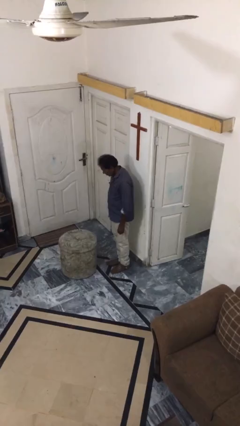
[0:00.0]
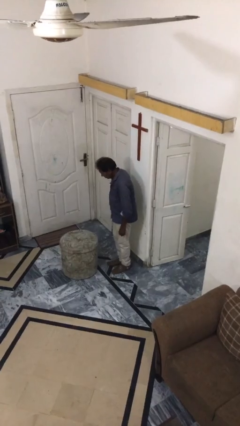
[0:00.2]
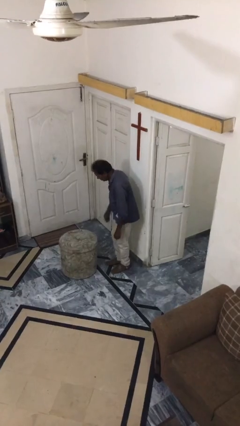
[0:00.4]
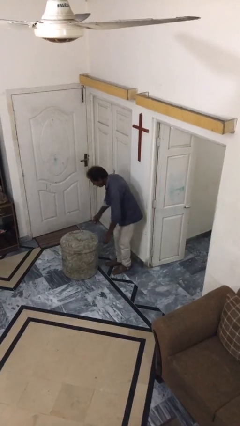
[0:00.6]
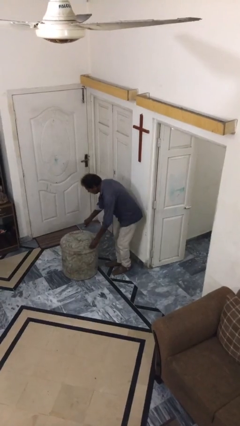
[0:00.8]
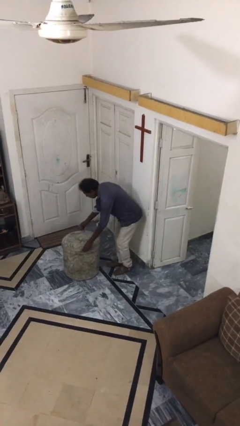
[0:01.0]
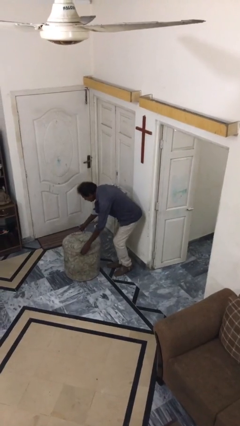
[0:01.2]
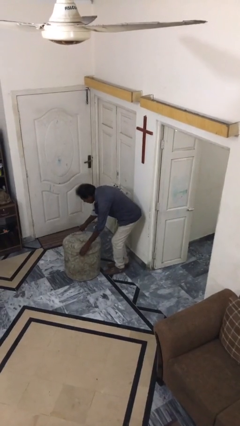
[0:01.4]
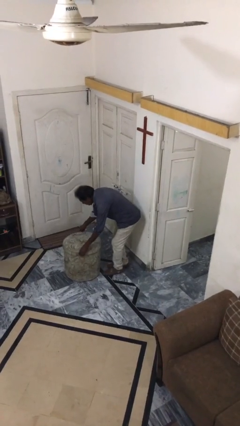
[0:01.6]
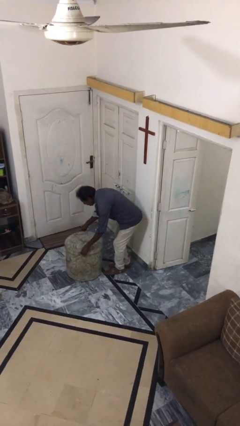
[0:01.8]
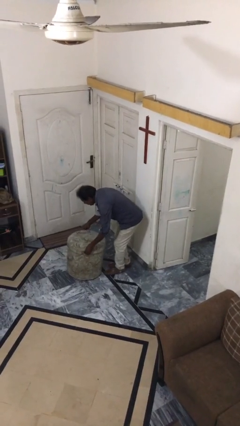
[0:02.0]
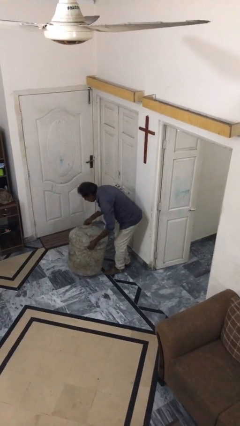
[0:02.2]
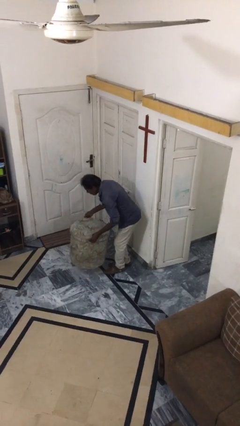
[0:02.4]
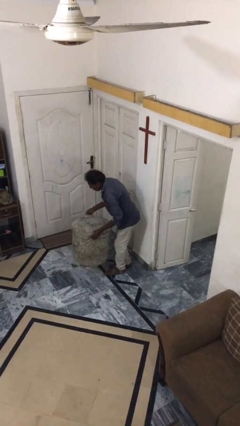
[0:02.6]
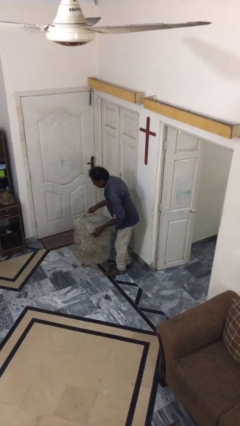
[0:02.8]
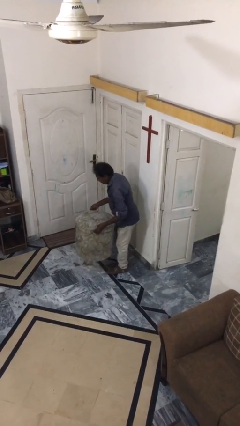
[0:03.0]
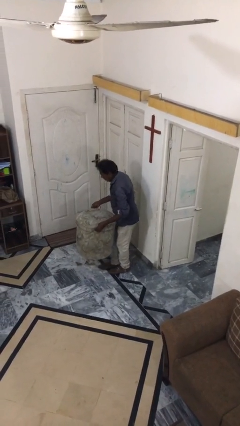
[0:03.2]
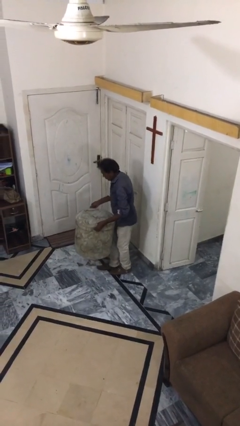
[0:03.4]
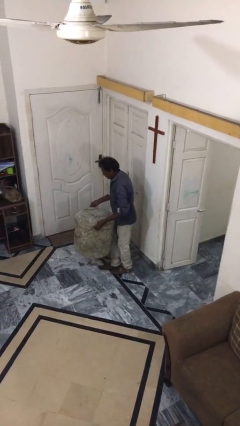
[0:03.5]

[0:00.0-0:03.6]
person picks up object from floor

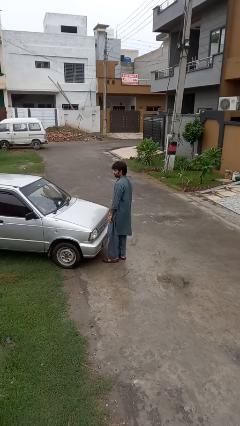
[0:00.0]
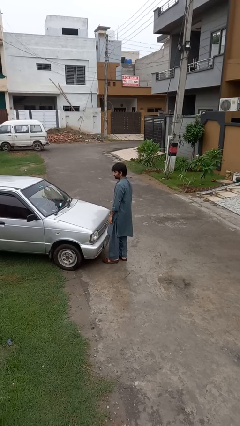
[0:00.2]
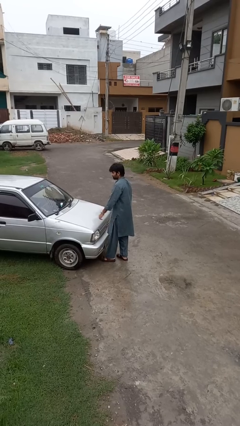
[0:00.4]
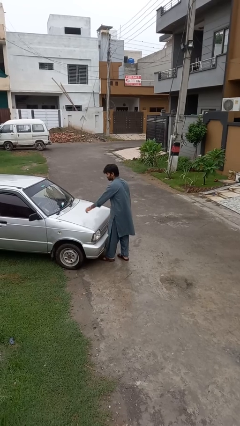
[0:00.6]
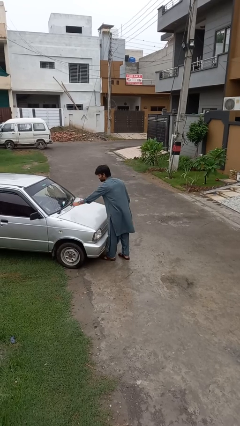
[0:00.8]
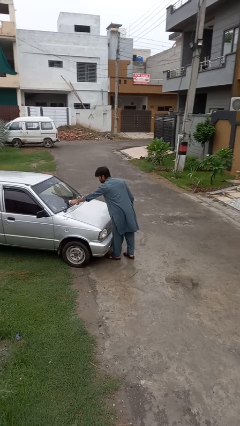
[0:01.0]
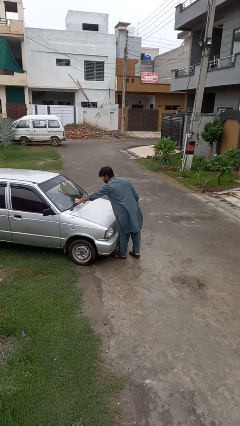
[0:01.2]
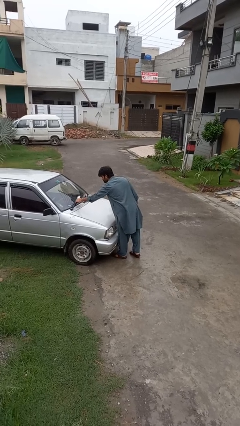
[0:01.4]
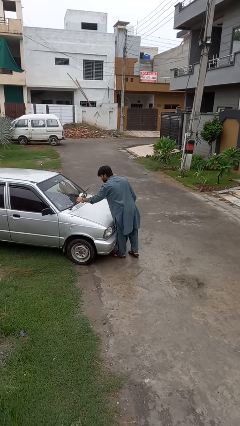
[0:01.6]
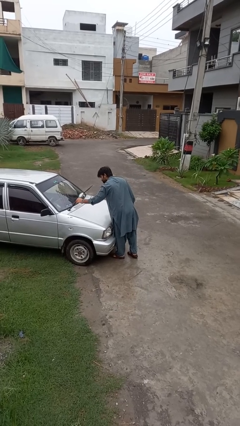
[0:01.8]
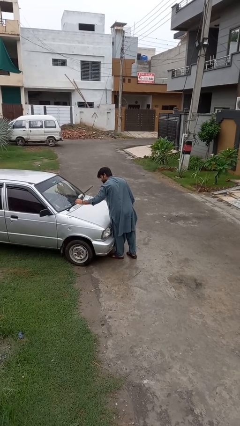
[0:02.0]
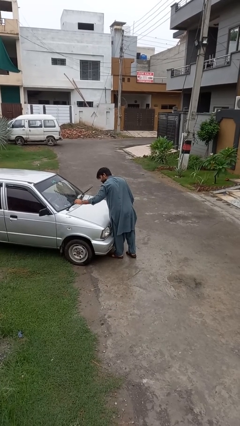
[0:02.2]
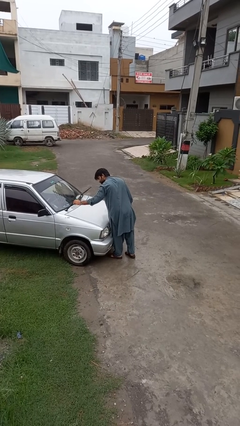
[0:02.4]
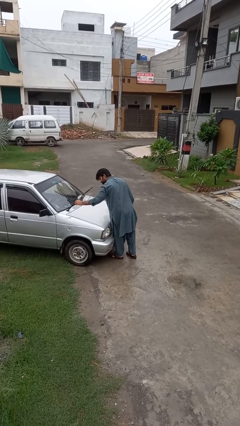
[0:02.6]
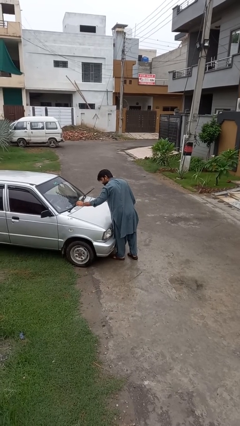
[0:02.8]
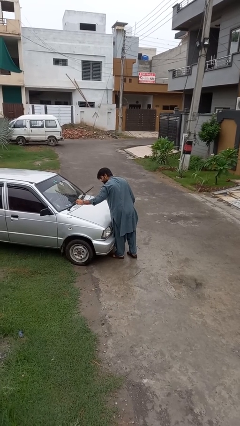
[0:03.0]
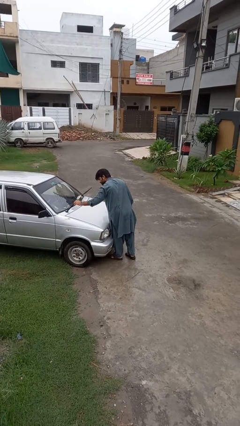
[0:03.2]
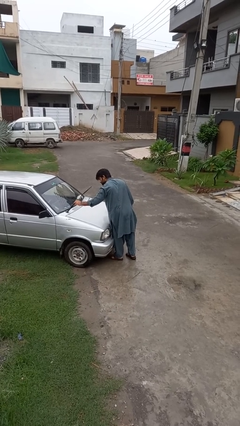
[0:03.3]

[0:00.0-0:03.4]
person flips up car wipers

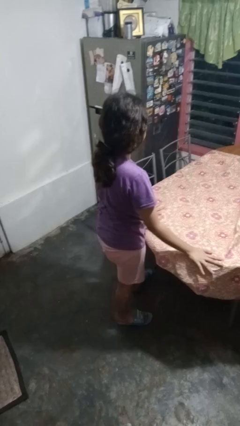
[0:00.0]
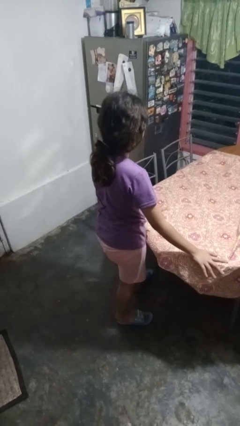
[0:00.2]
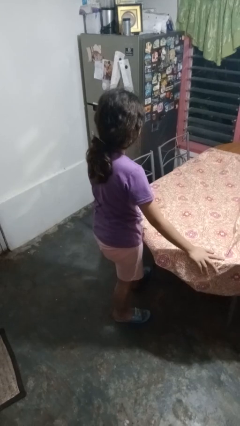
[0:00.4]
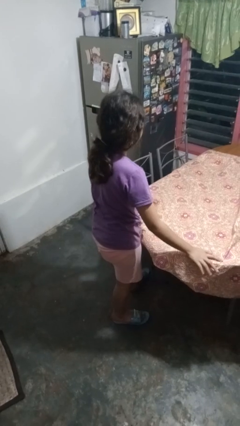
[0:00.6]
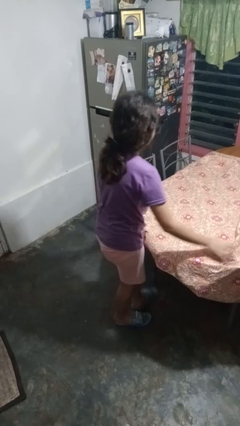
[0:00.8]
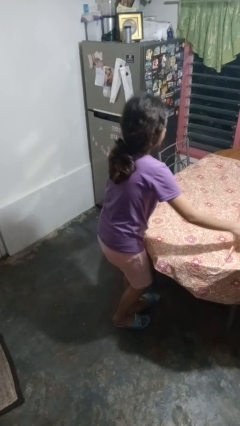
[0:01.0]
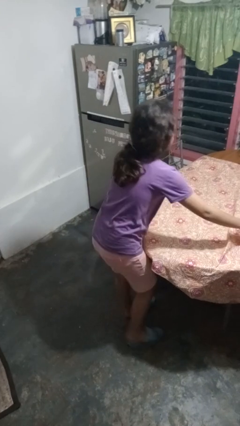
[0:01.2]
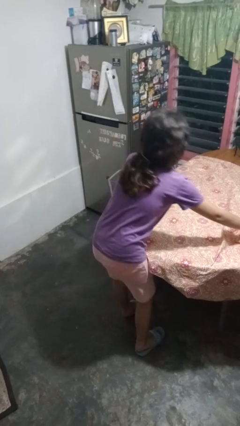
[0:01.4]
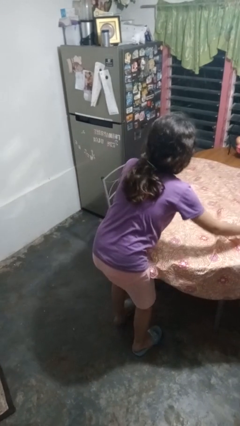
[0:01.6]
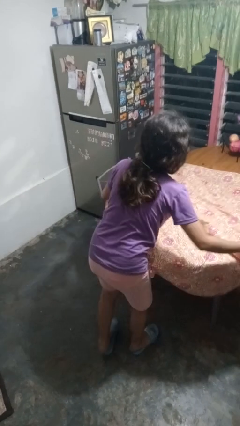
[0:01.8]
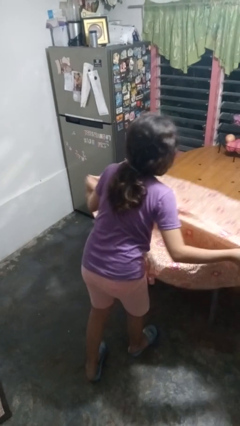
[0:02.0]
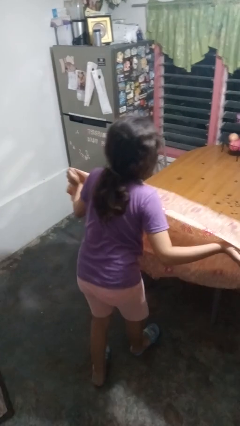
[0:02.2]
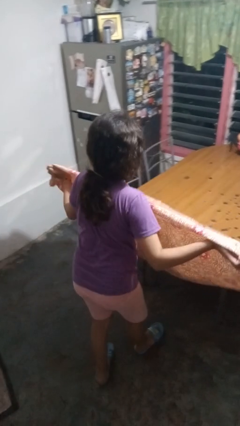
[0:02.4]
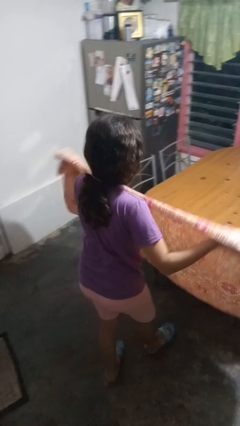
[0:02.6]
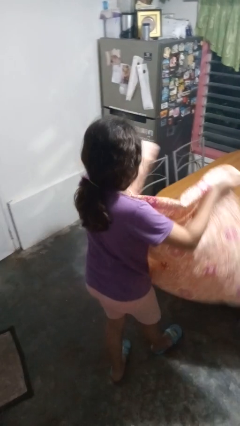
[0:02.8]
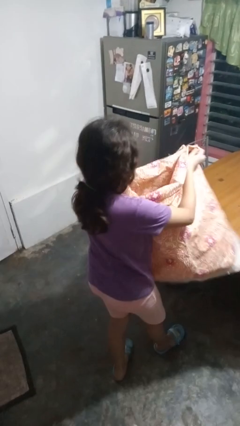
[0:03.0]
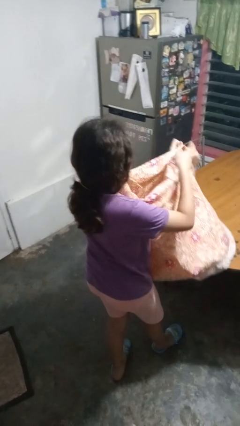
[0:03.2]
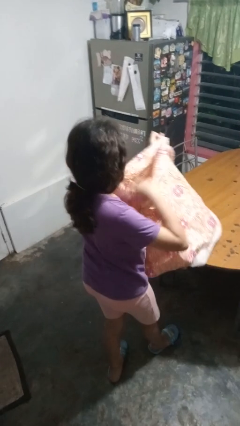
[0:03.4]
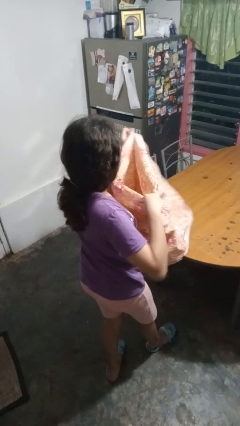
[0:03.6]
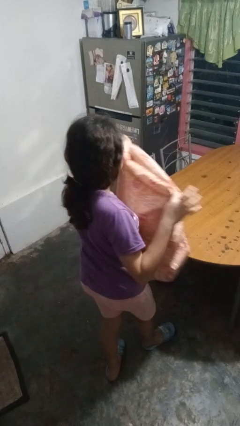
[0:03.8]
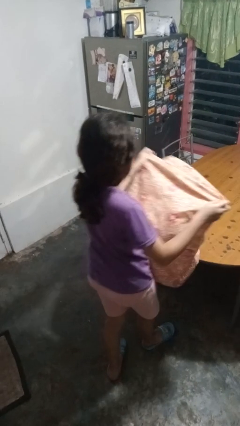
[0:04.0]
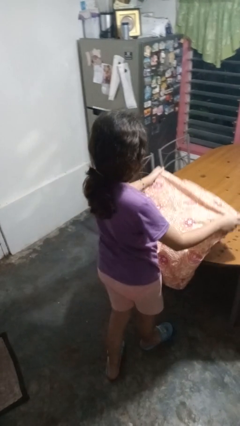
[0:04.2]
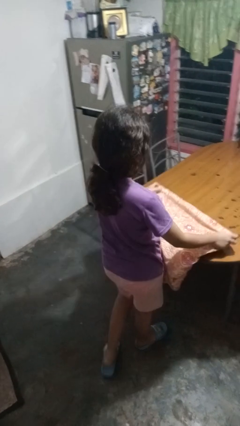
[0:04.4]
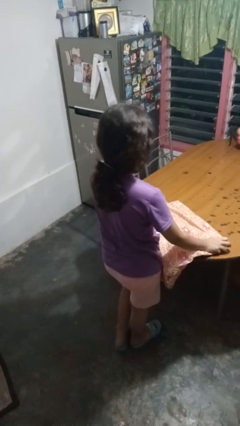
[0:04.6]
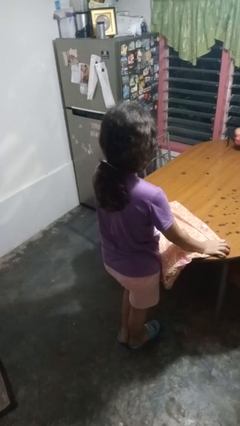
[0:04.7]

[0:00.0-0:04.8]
person folds tablecloth

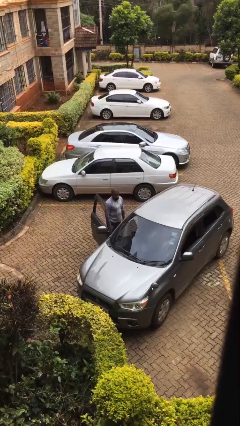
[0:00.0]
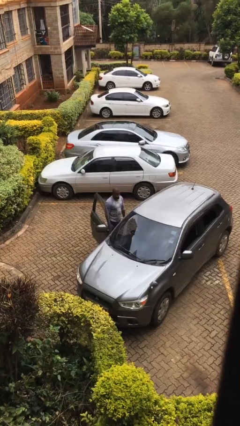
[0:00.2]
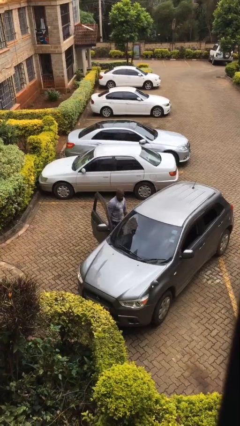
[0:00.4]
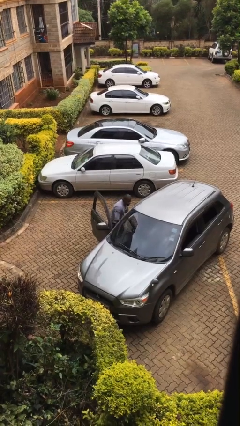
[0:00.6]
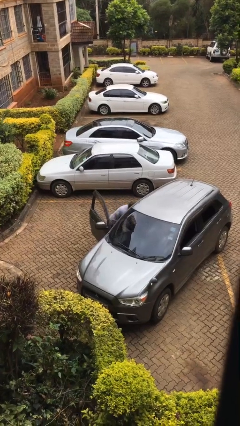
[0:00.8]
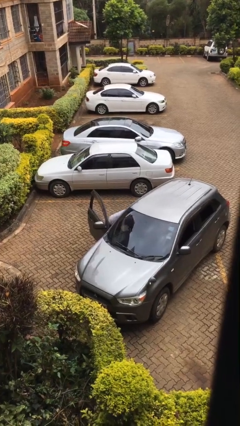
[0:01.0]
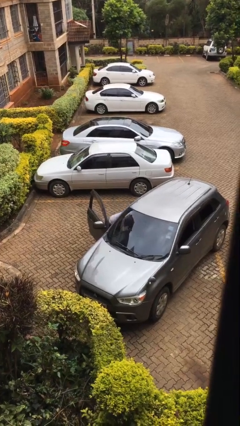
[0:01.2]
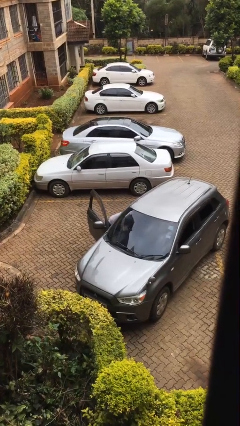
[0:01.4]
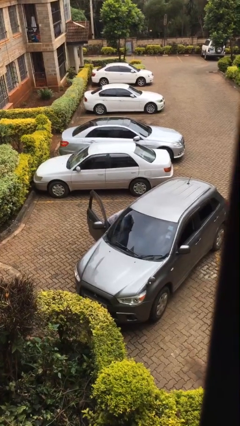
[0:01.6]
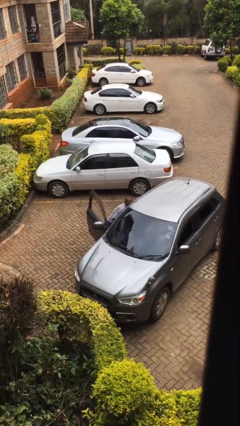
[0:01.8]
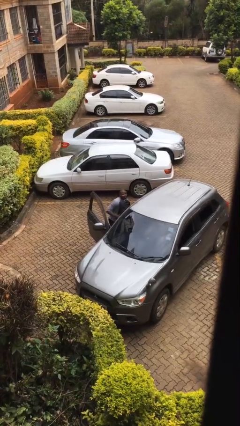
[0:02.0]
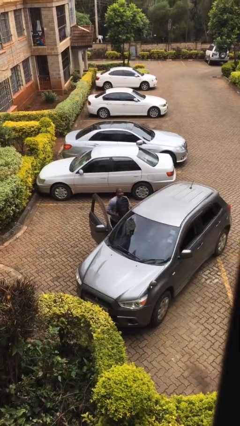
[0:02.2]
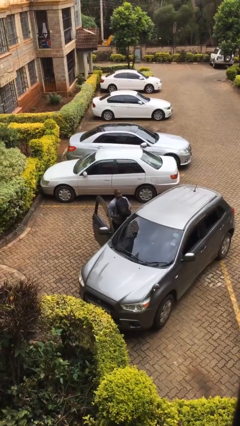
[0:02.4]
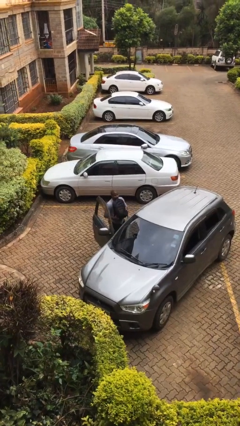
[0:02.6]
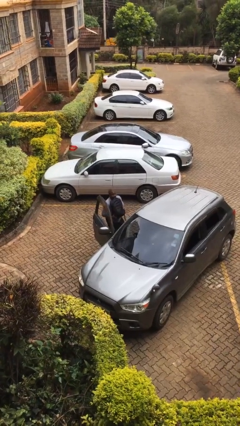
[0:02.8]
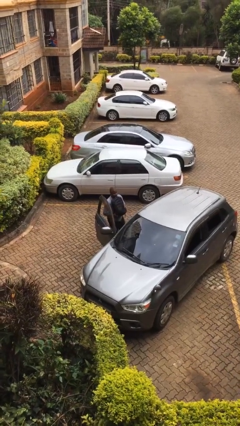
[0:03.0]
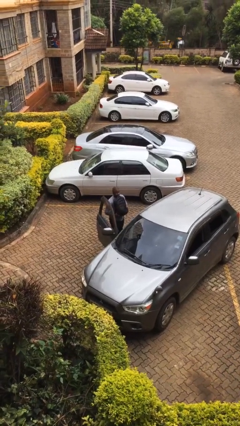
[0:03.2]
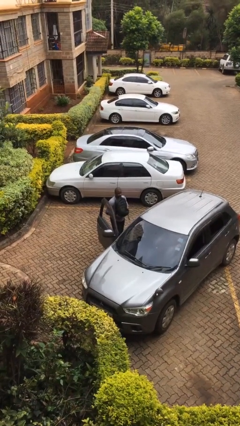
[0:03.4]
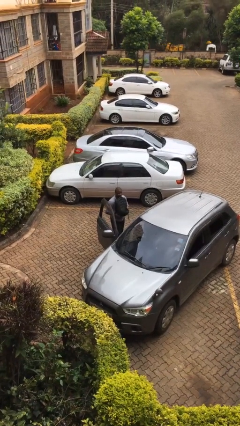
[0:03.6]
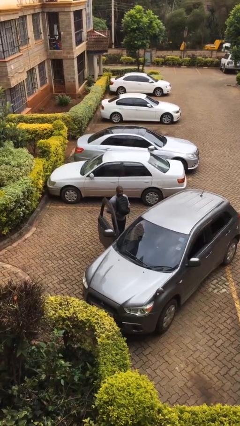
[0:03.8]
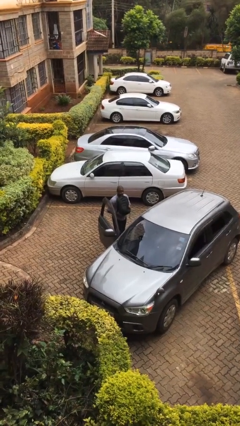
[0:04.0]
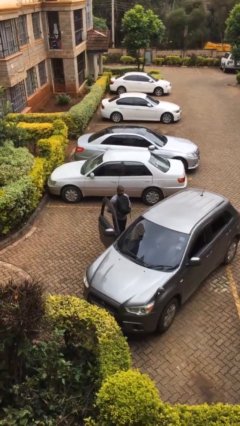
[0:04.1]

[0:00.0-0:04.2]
person unloads car

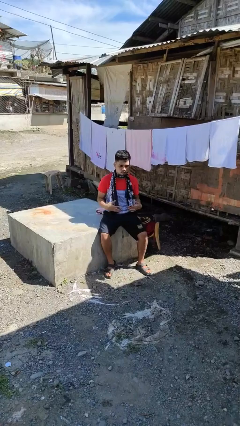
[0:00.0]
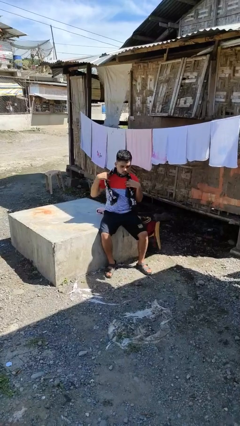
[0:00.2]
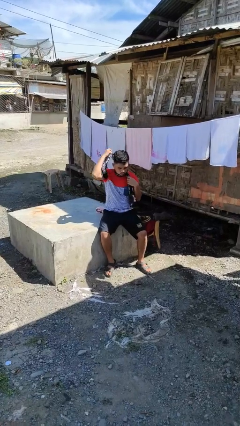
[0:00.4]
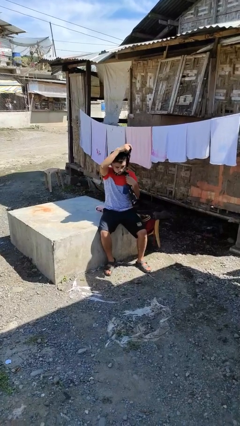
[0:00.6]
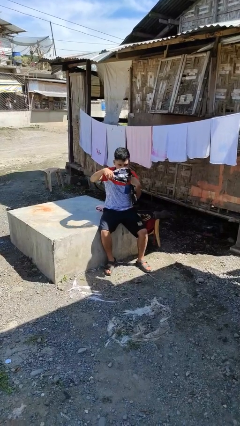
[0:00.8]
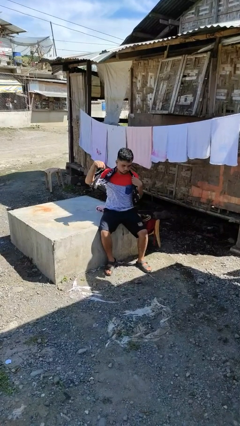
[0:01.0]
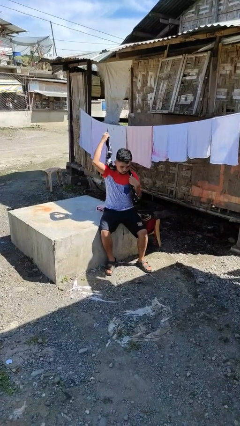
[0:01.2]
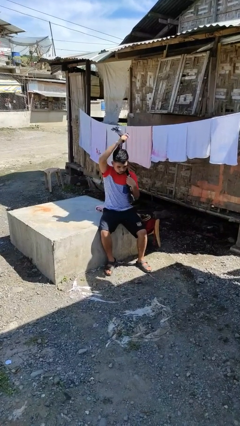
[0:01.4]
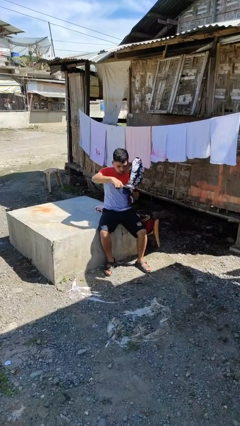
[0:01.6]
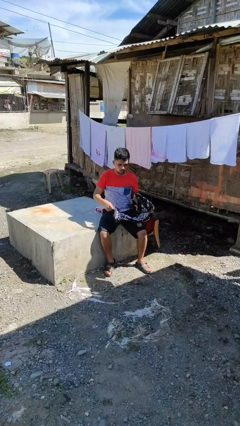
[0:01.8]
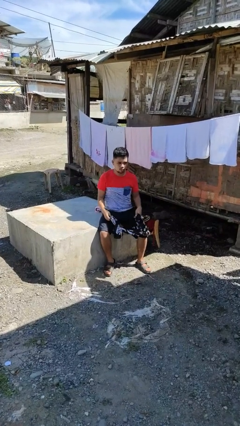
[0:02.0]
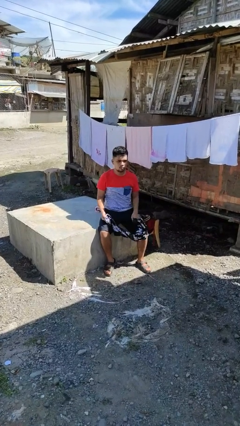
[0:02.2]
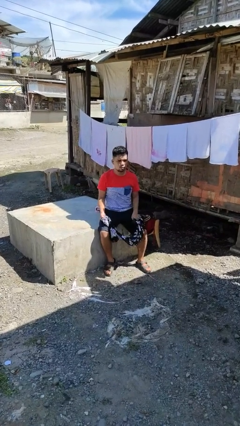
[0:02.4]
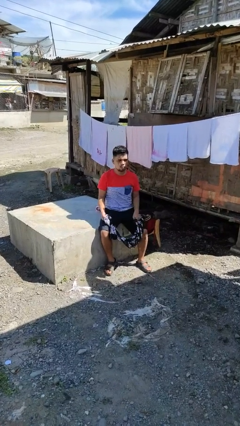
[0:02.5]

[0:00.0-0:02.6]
person takes off scarf
